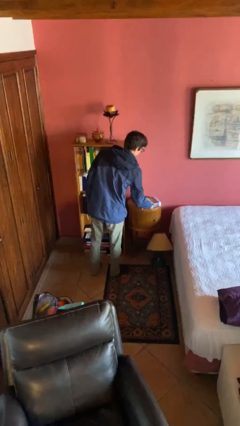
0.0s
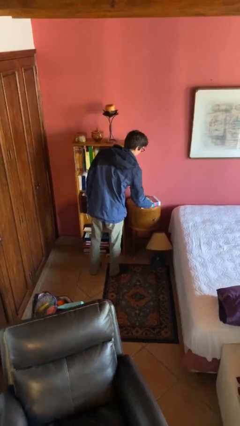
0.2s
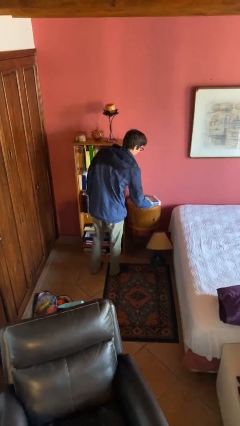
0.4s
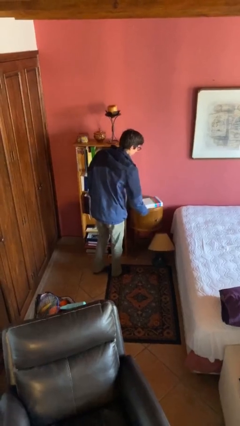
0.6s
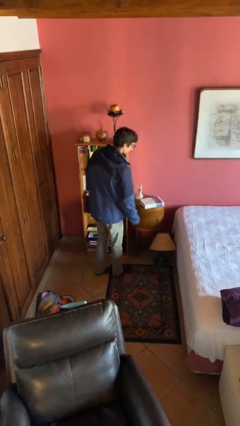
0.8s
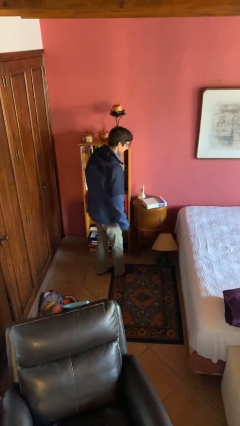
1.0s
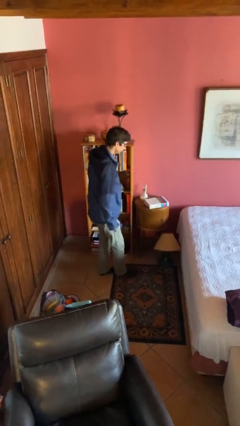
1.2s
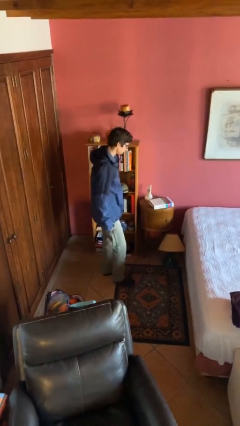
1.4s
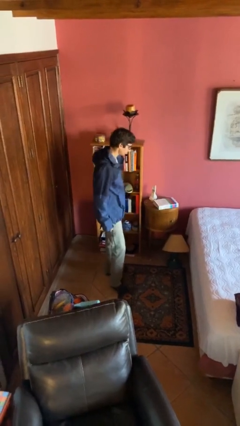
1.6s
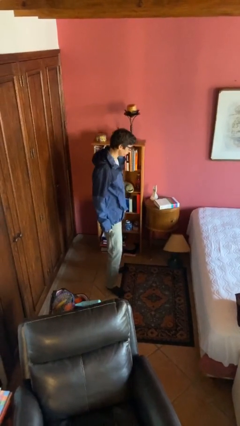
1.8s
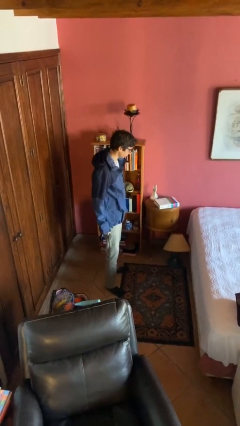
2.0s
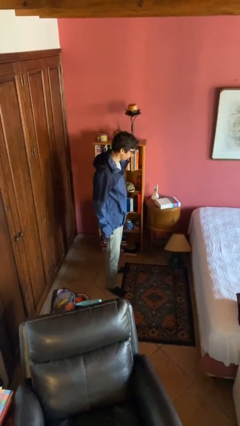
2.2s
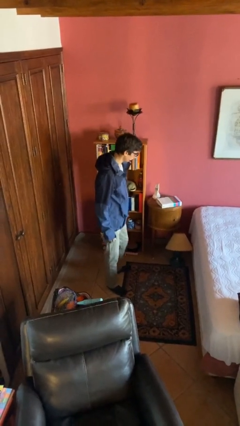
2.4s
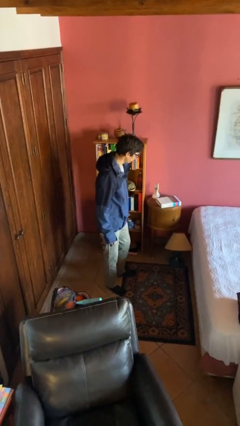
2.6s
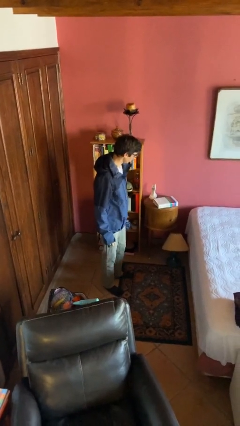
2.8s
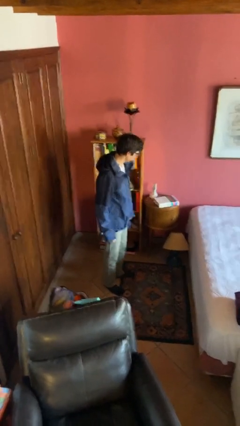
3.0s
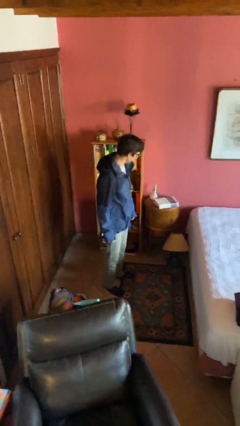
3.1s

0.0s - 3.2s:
person puts down object on table

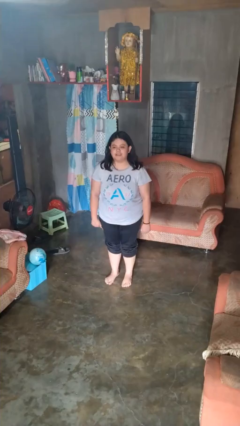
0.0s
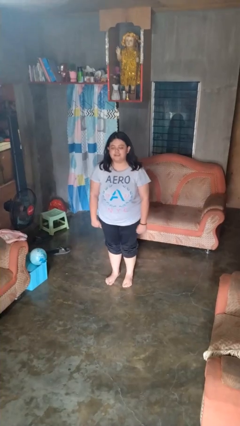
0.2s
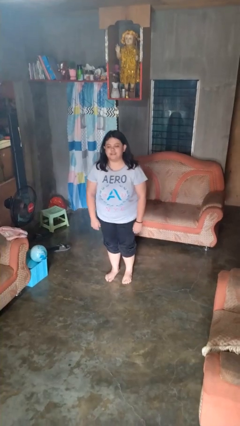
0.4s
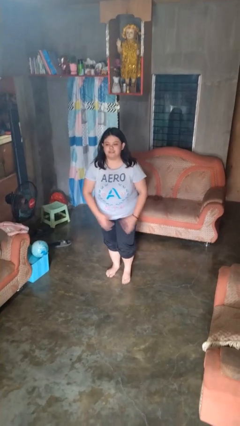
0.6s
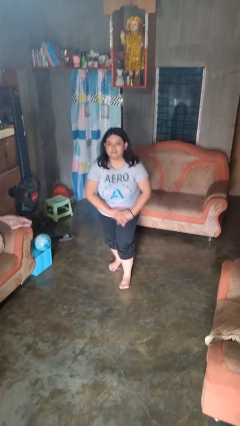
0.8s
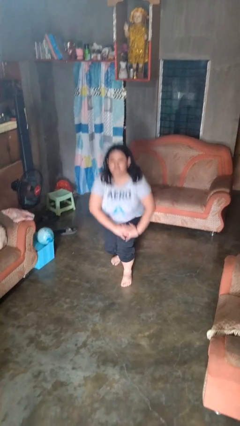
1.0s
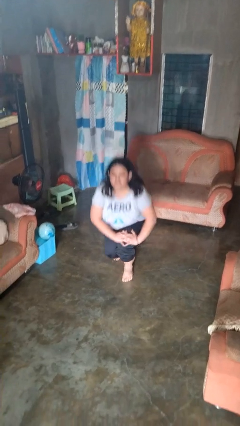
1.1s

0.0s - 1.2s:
person kneels

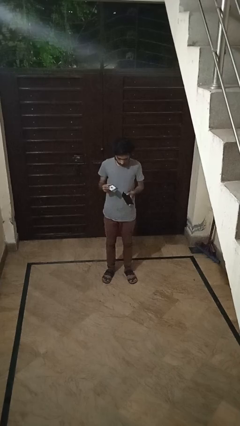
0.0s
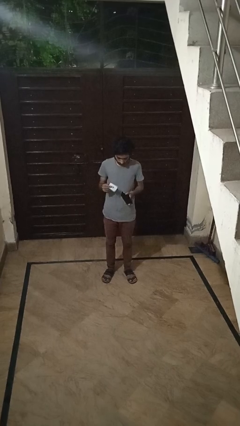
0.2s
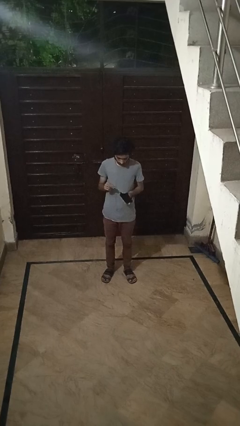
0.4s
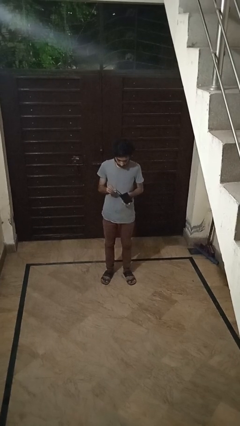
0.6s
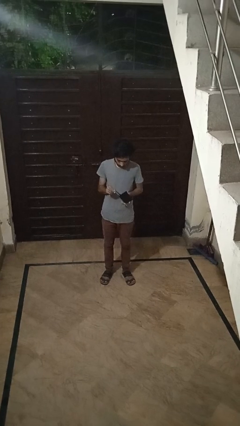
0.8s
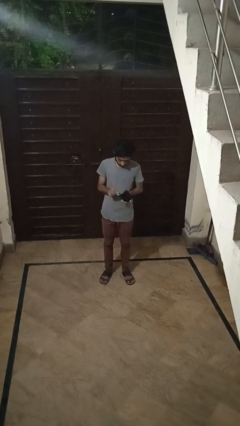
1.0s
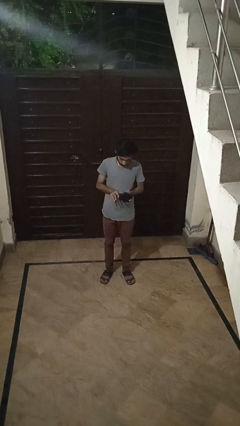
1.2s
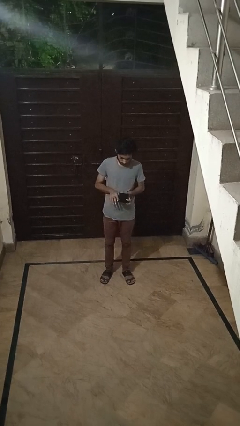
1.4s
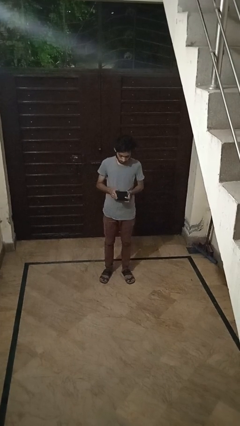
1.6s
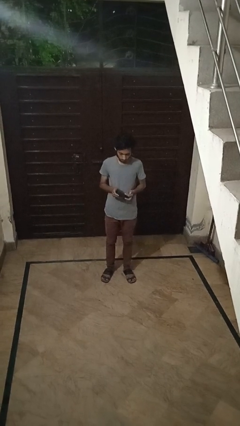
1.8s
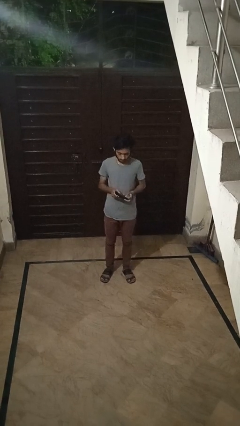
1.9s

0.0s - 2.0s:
person puts object into purse

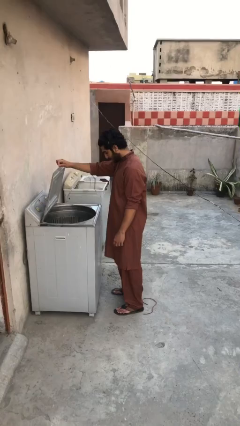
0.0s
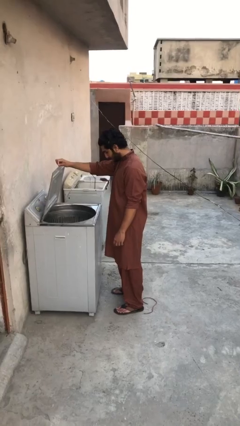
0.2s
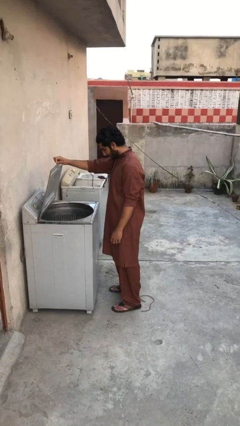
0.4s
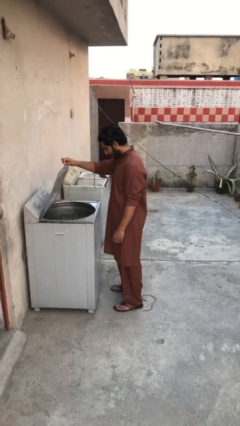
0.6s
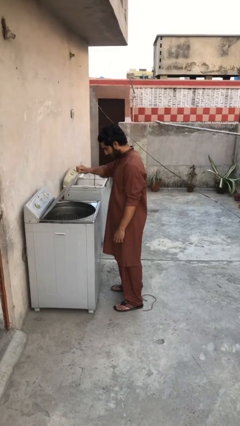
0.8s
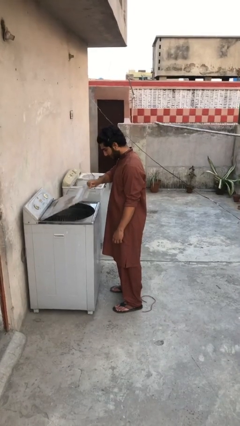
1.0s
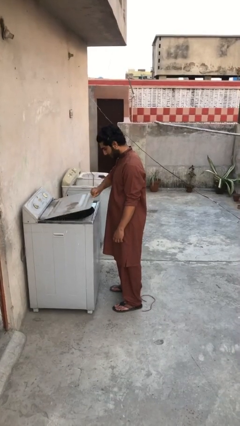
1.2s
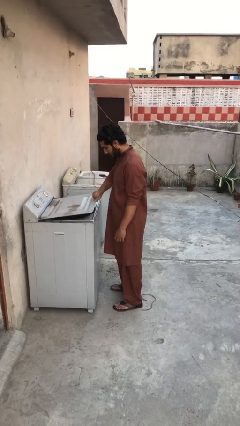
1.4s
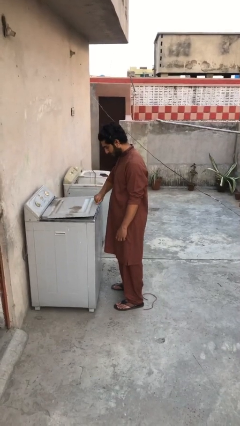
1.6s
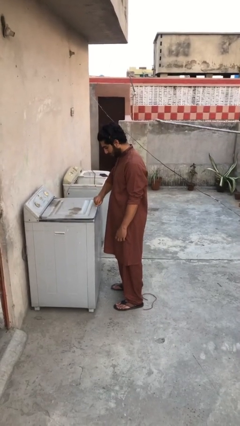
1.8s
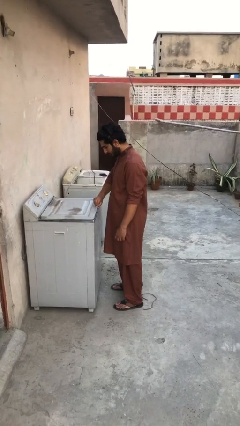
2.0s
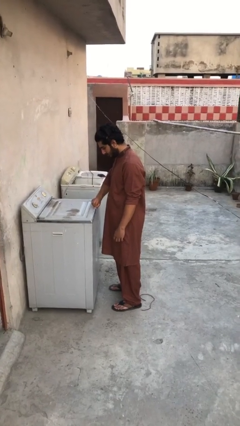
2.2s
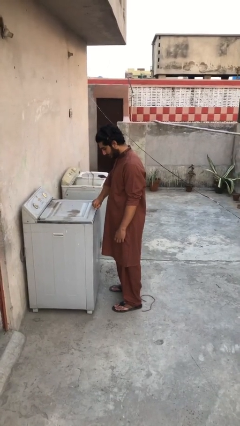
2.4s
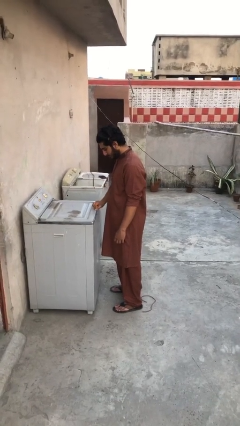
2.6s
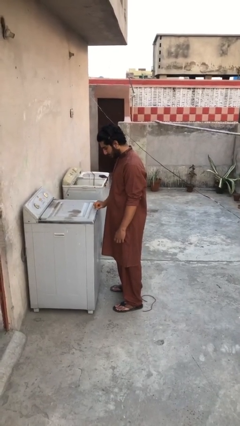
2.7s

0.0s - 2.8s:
person closes clothes washer

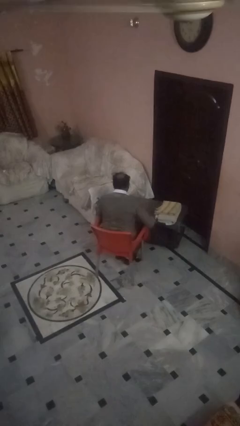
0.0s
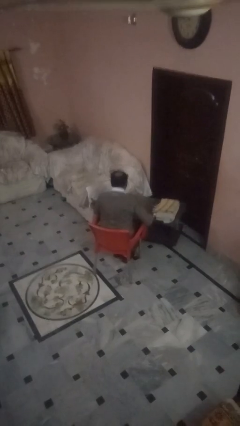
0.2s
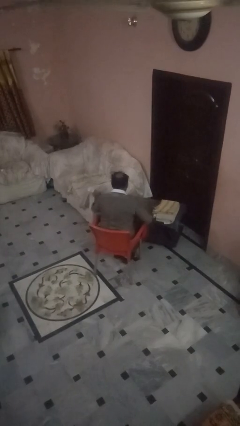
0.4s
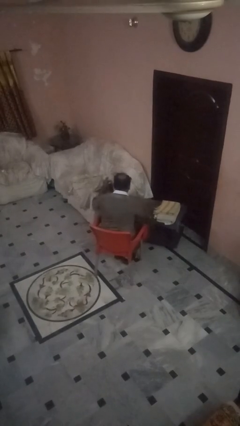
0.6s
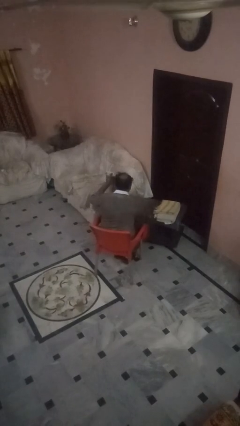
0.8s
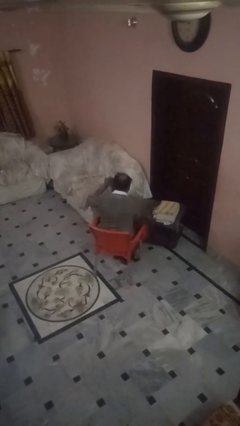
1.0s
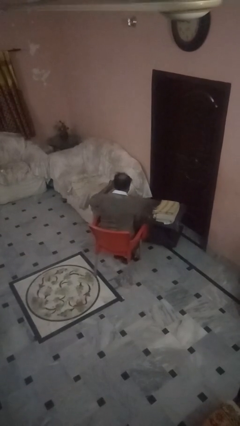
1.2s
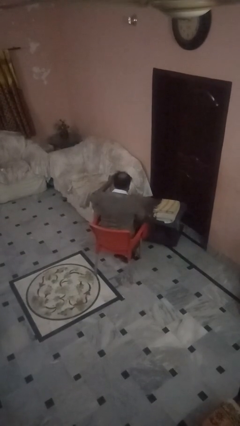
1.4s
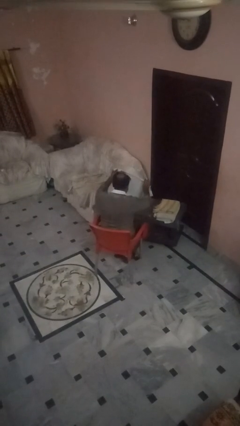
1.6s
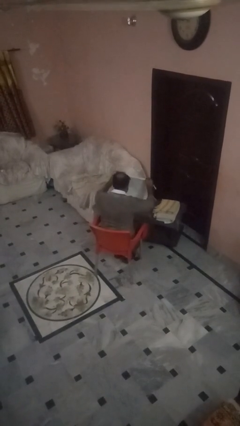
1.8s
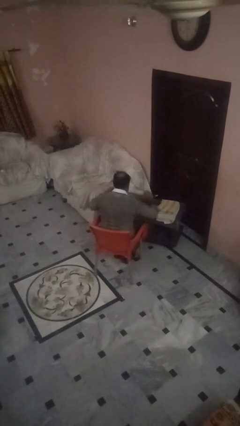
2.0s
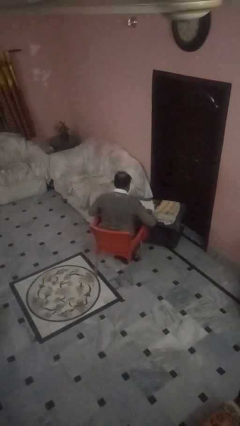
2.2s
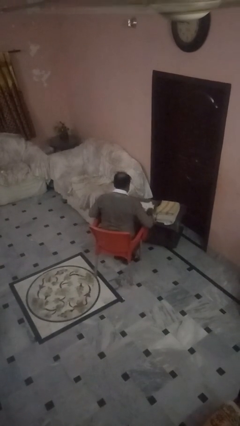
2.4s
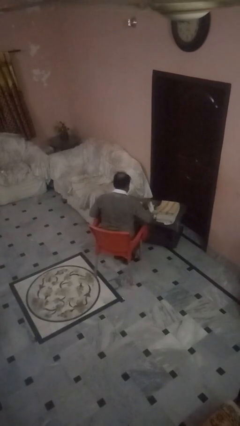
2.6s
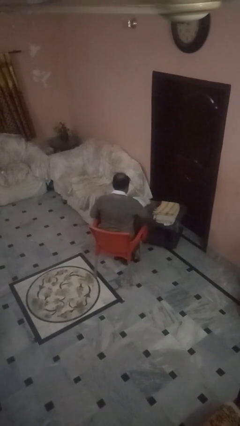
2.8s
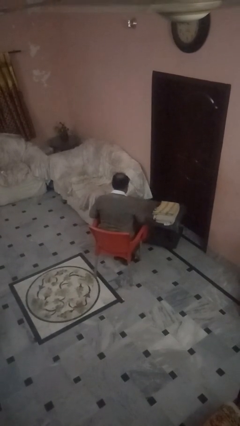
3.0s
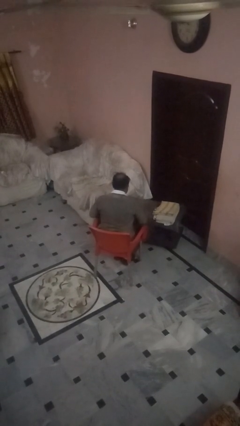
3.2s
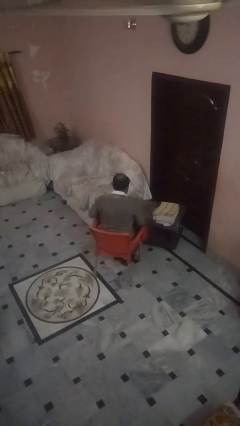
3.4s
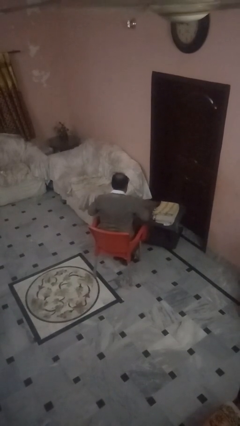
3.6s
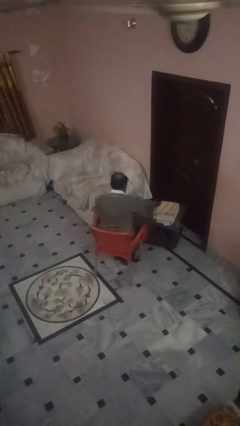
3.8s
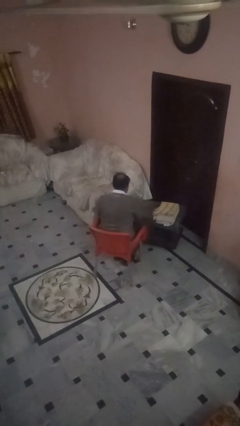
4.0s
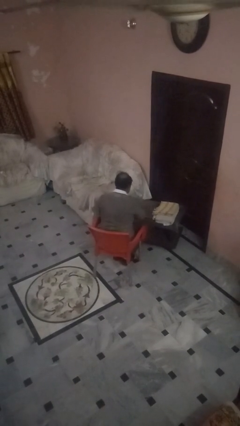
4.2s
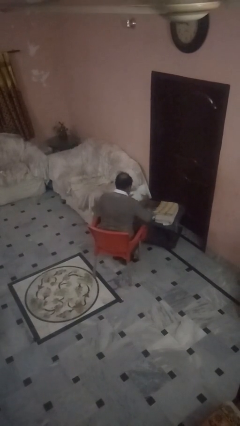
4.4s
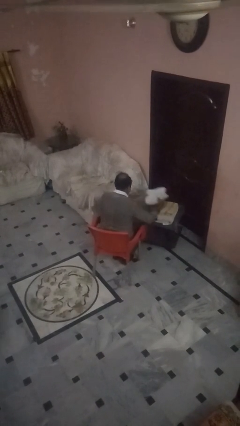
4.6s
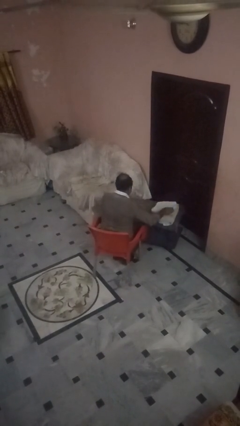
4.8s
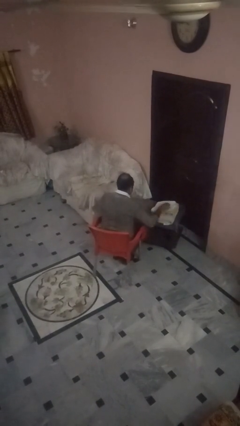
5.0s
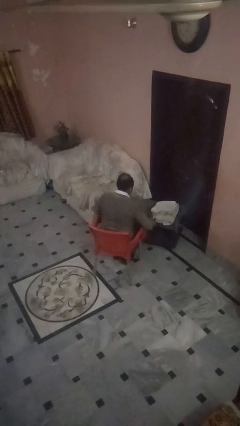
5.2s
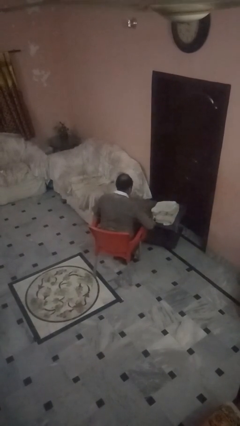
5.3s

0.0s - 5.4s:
person folds towel

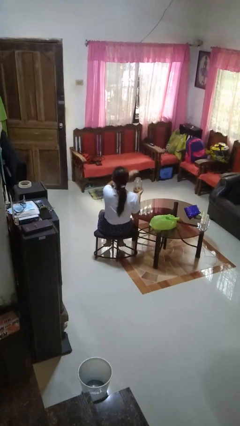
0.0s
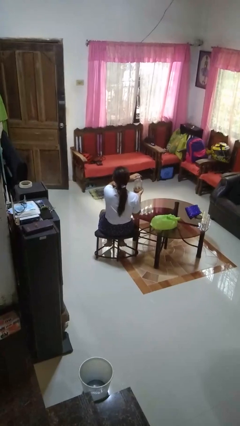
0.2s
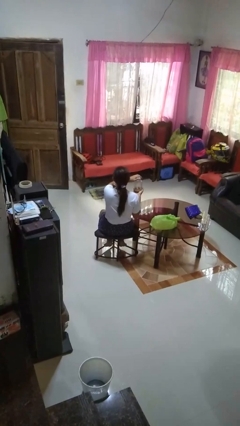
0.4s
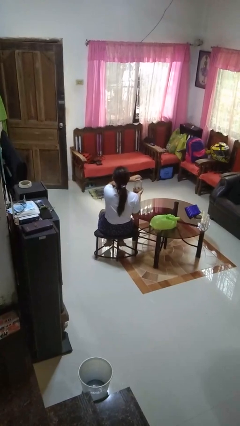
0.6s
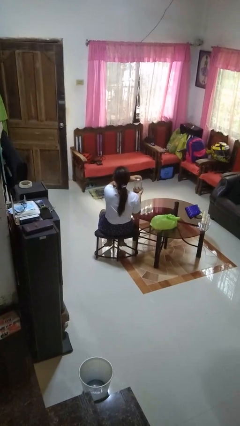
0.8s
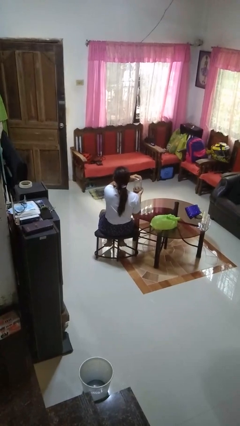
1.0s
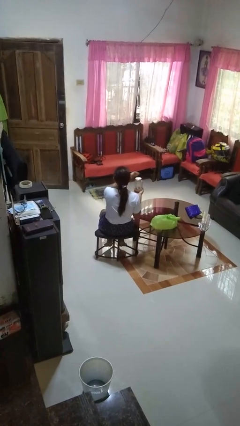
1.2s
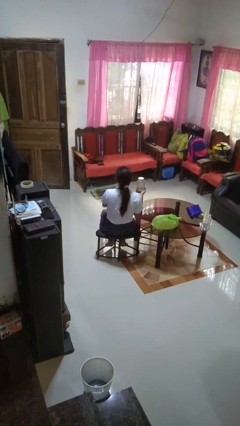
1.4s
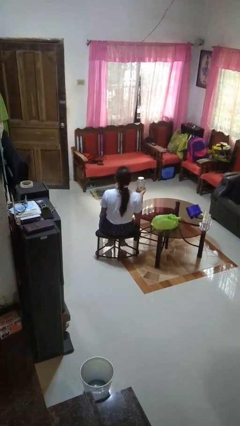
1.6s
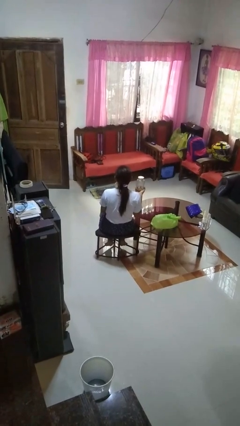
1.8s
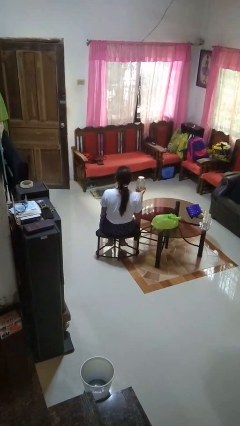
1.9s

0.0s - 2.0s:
person closes jar

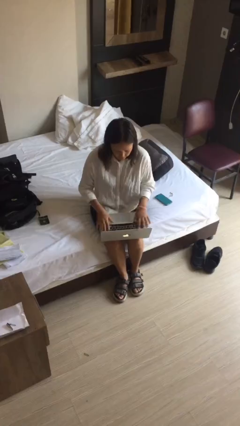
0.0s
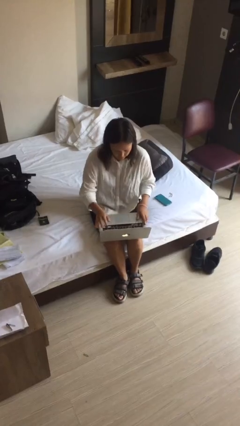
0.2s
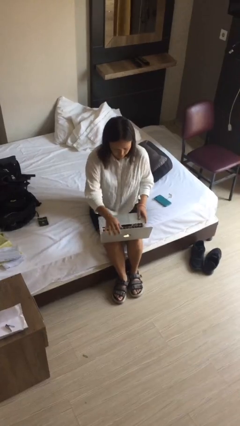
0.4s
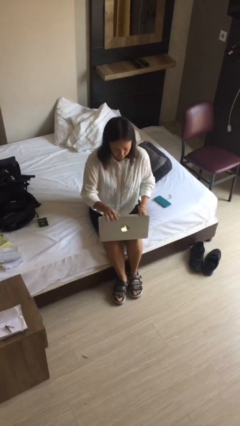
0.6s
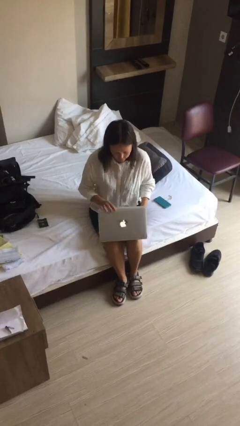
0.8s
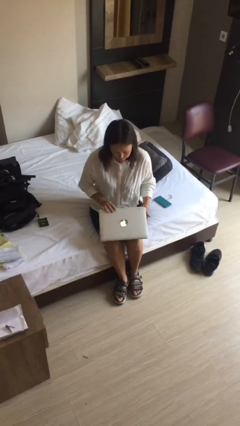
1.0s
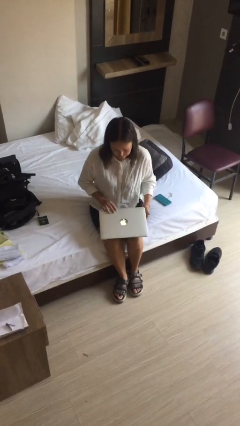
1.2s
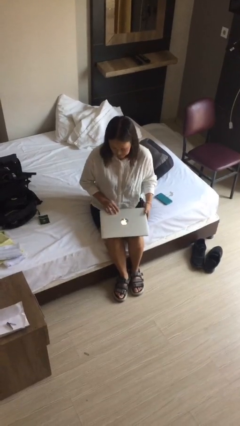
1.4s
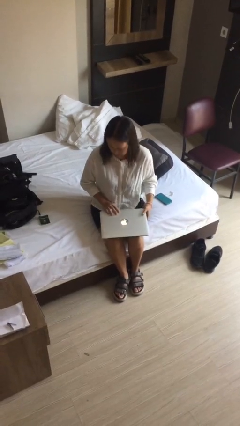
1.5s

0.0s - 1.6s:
person closes laptop
